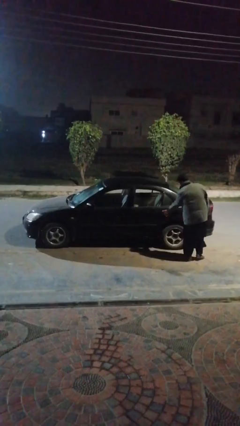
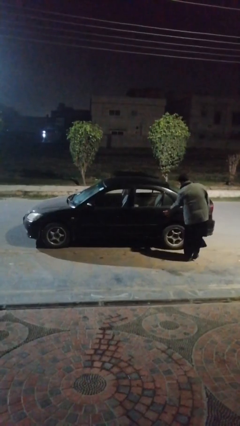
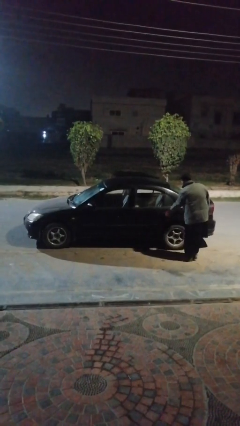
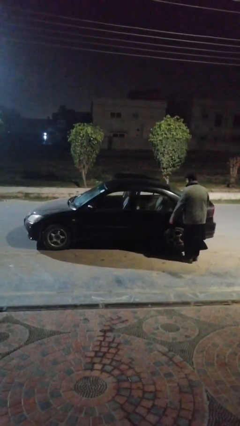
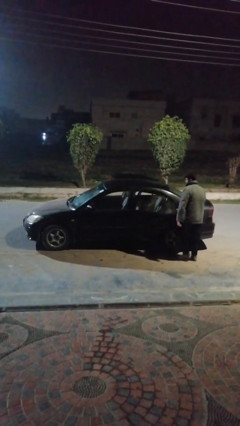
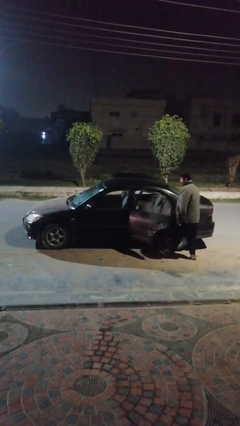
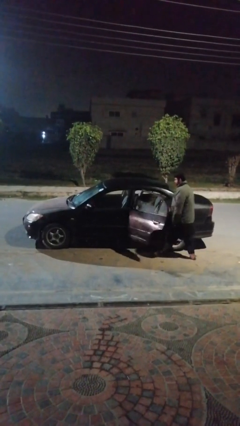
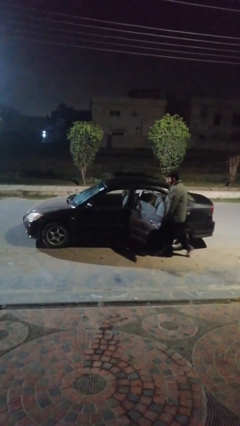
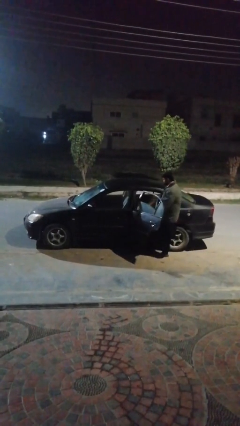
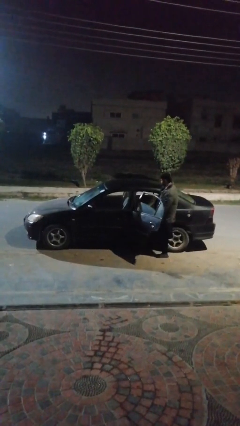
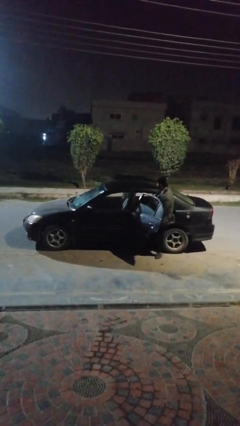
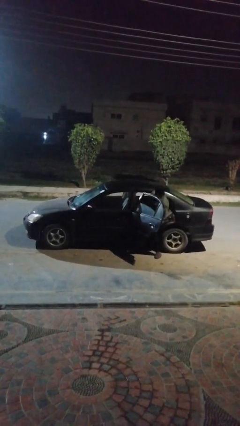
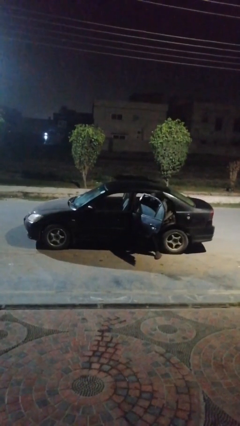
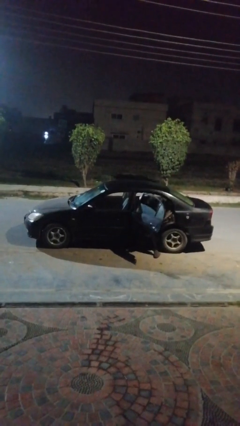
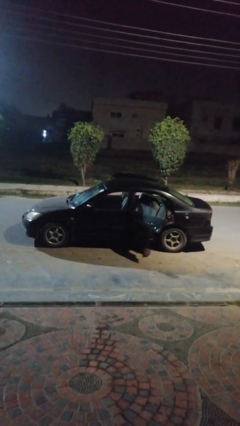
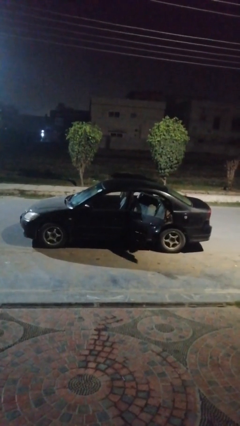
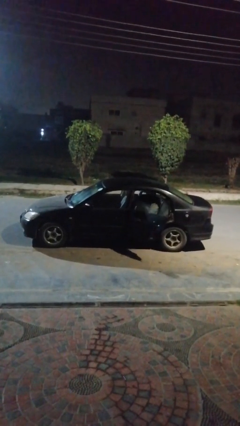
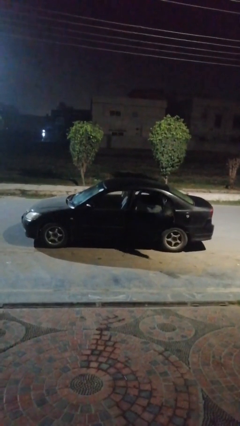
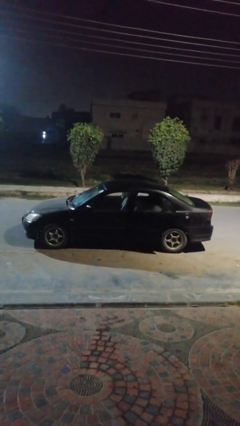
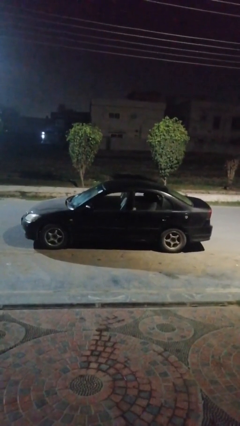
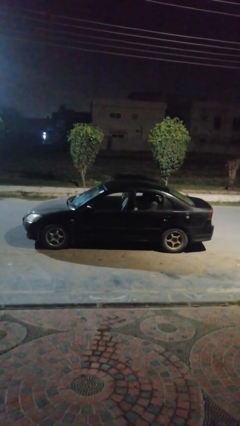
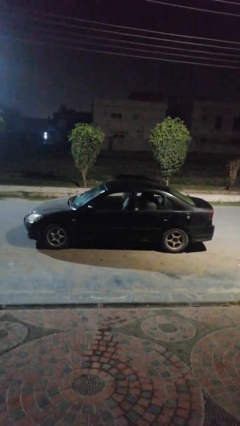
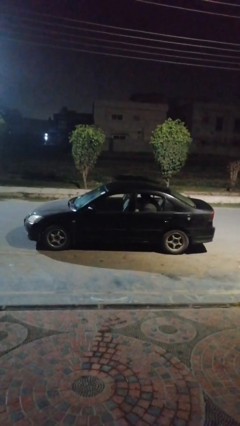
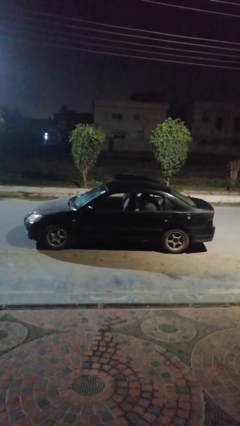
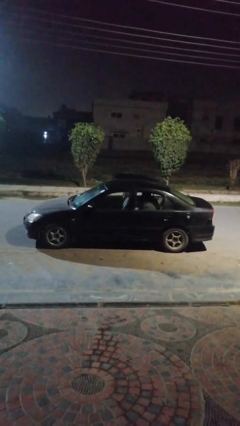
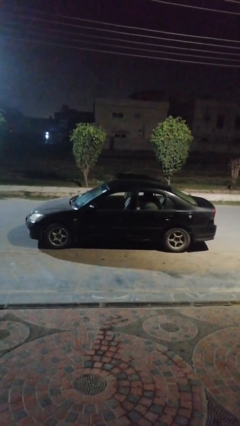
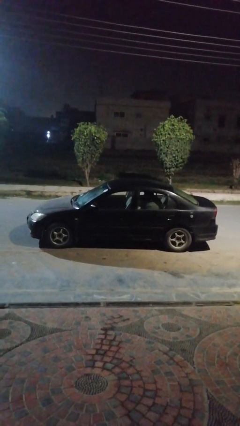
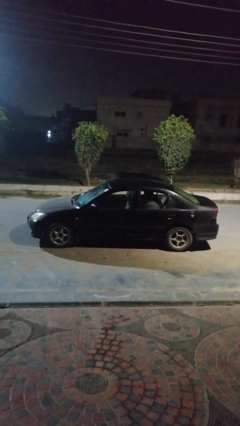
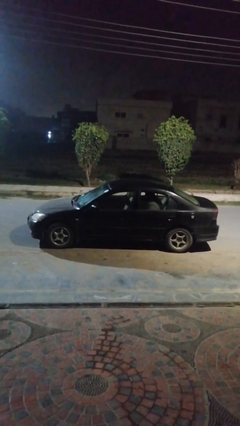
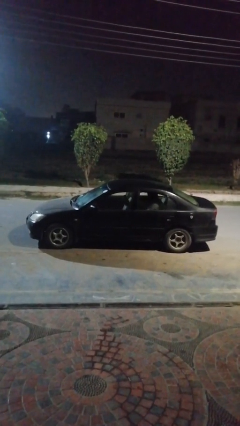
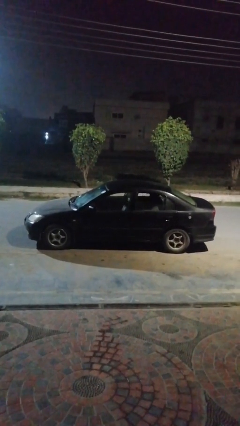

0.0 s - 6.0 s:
car picks up person

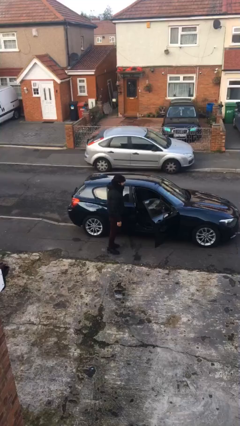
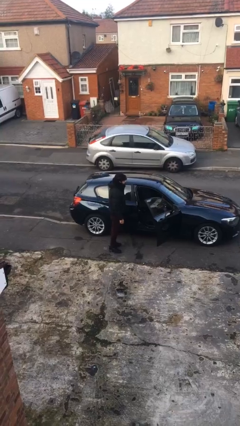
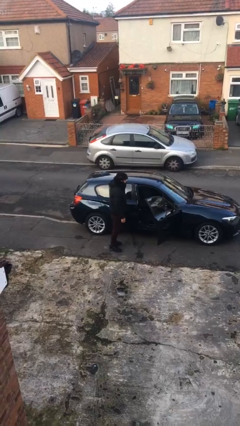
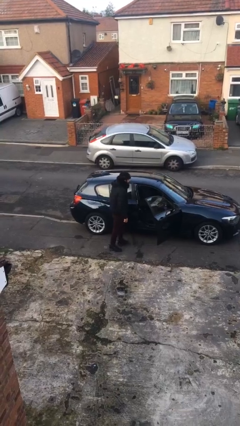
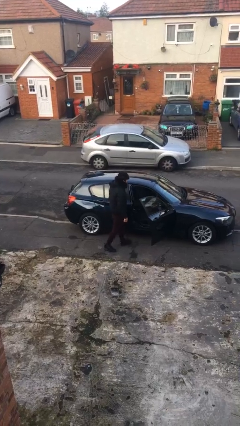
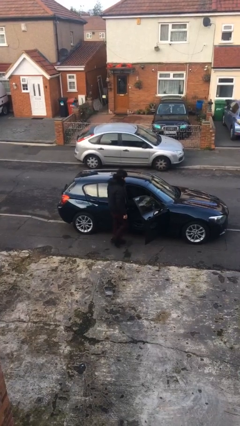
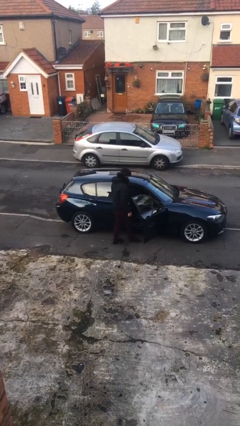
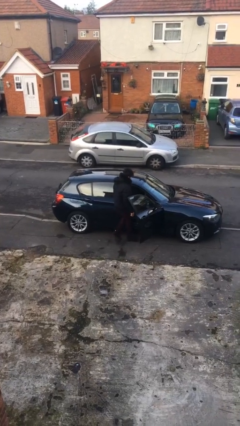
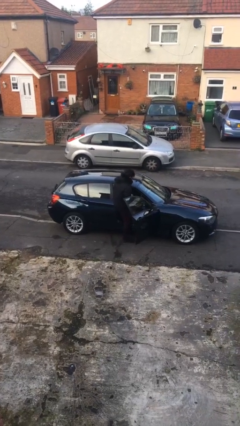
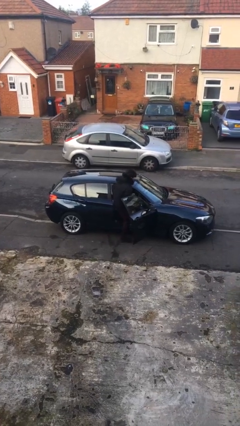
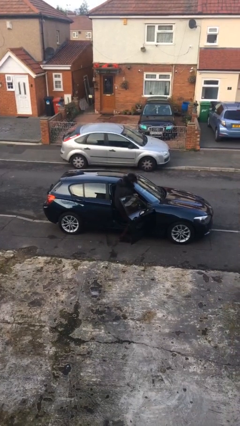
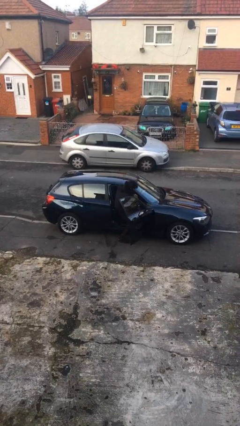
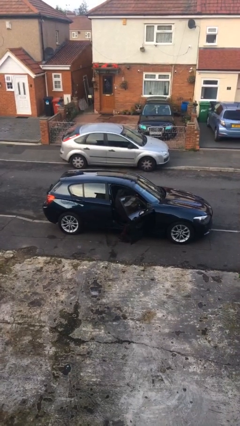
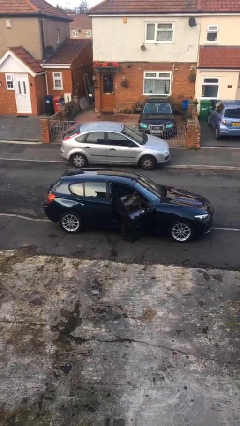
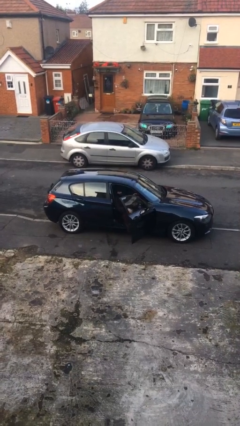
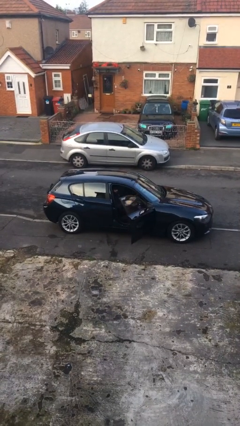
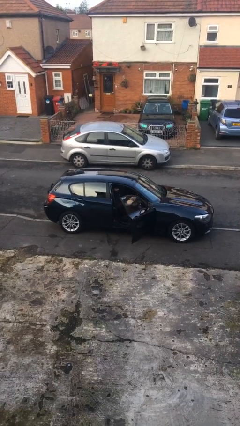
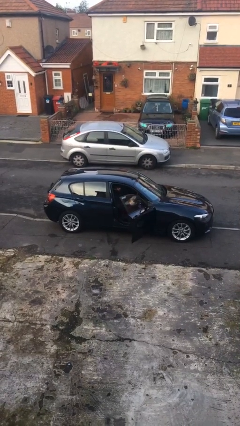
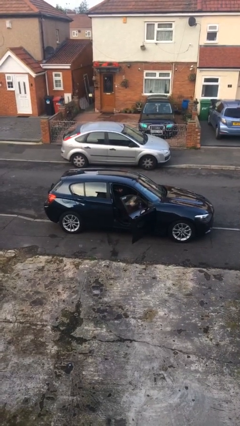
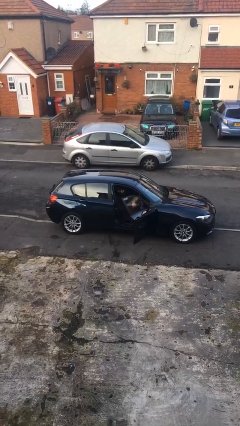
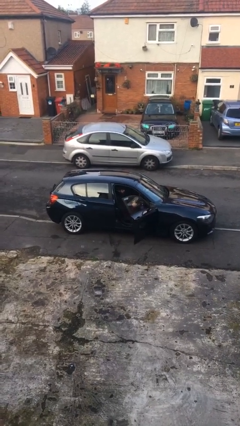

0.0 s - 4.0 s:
person enters car

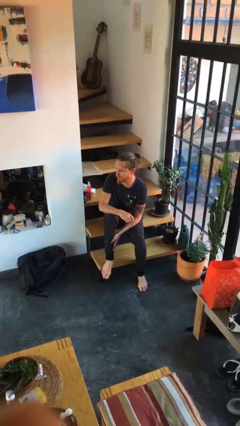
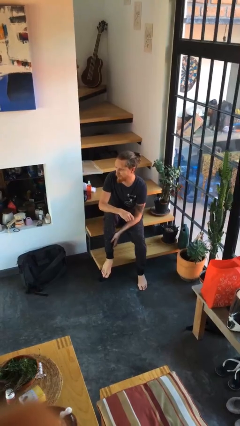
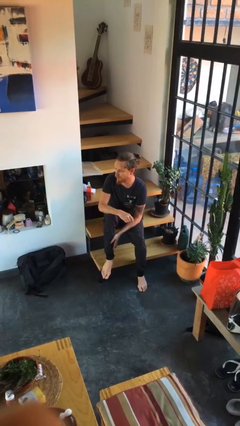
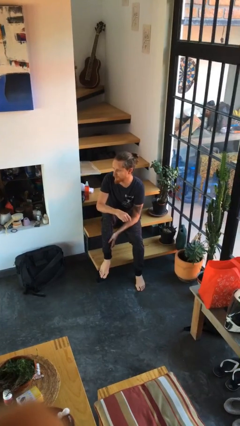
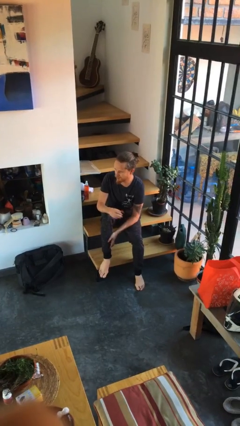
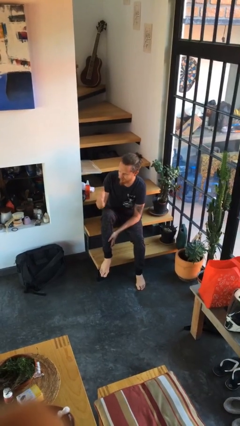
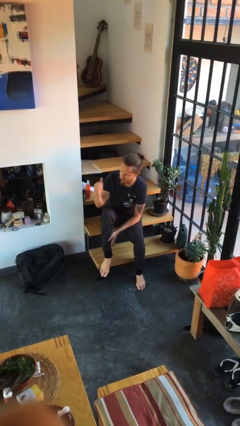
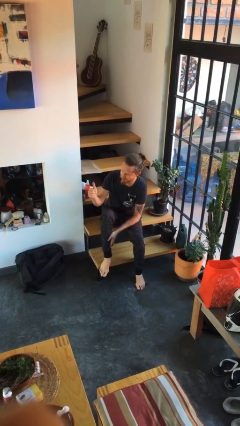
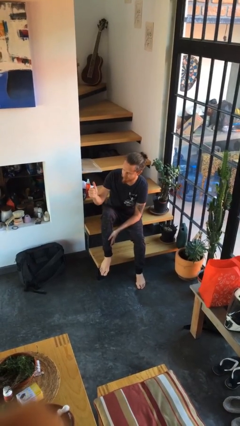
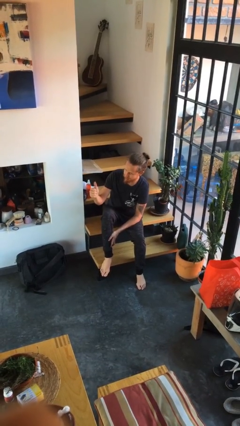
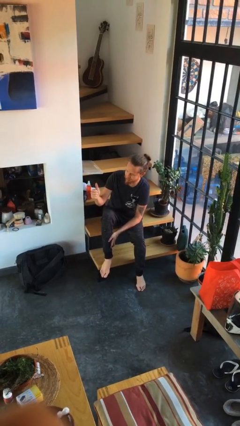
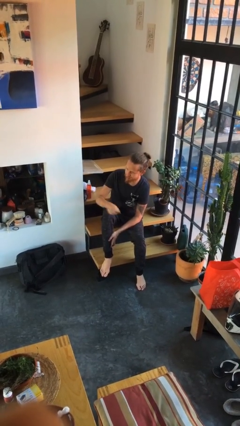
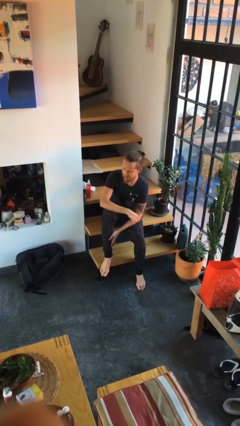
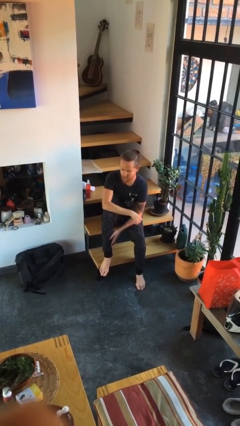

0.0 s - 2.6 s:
person gestures thumbs up

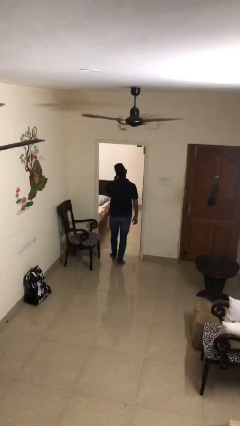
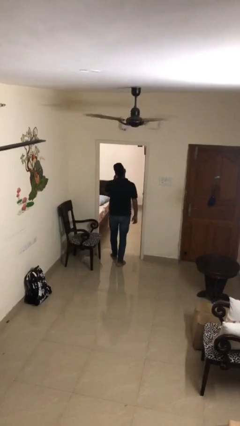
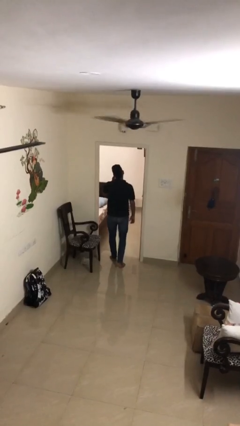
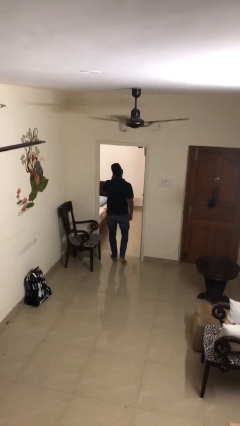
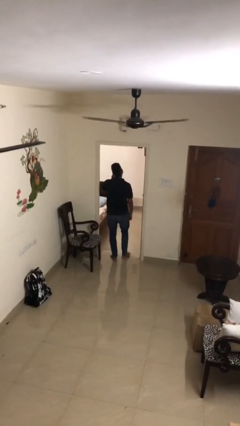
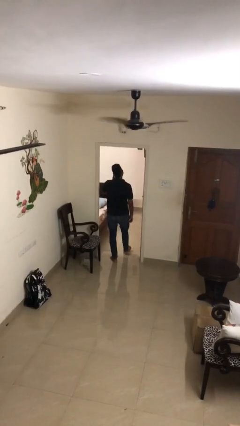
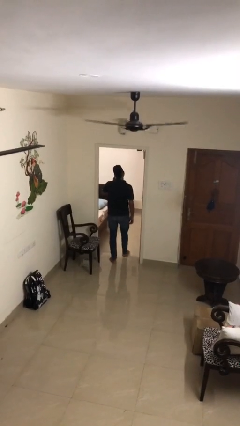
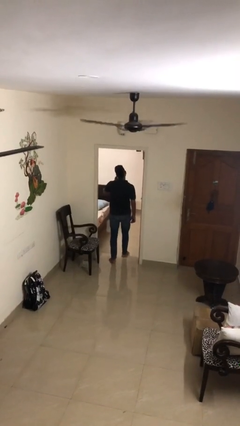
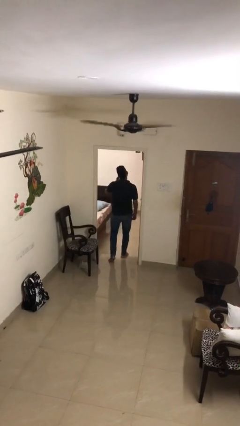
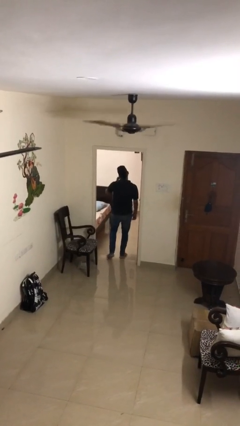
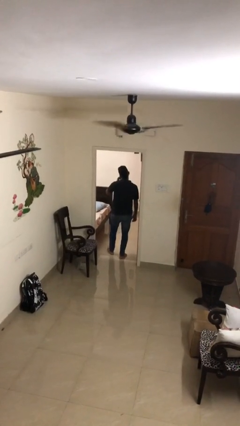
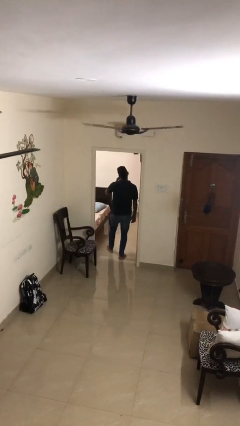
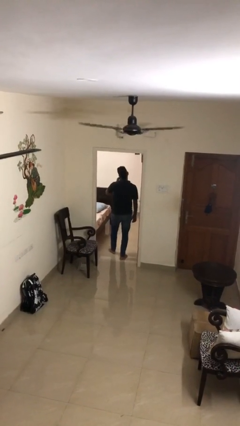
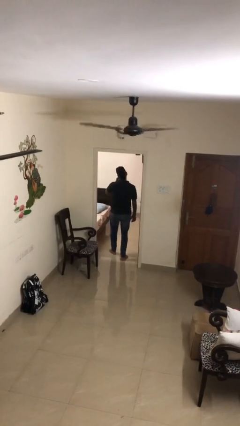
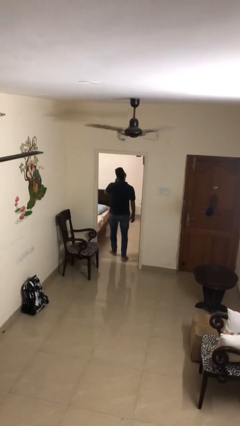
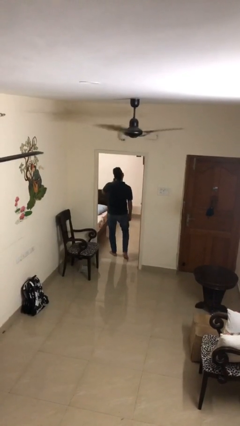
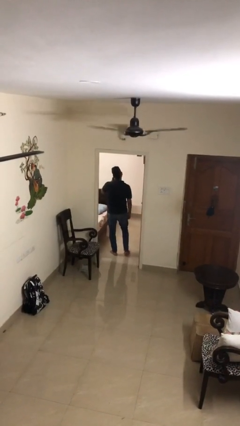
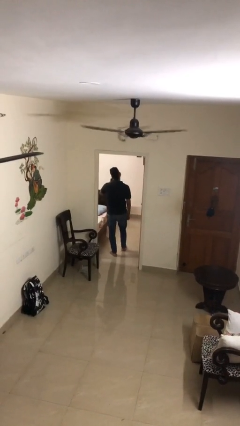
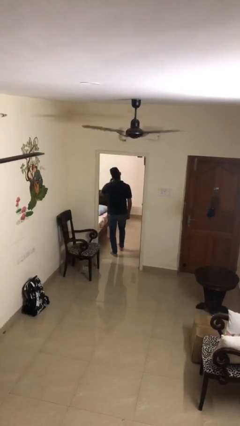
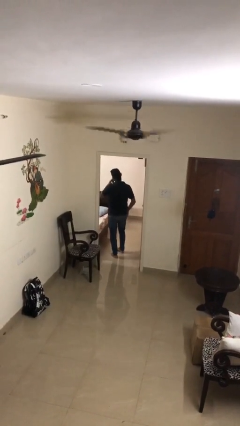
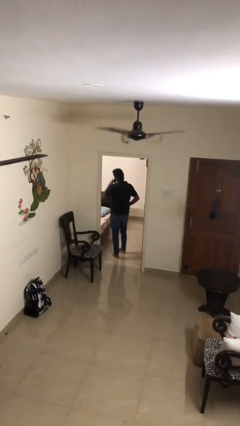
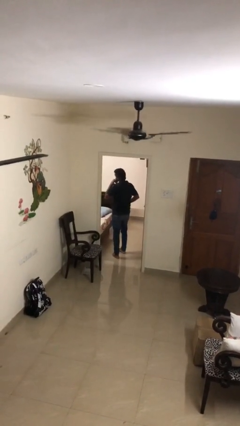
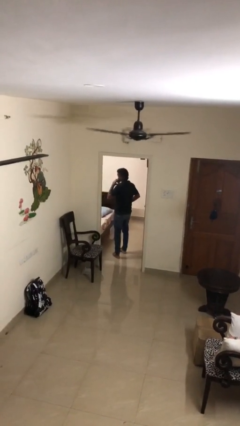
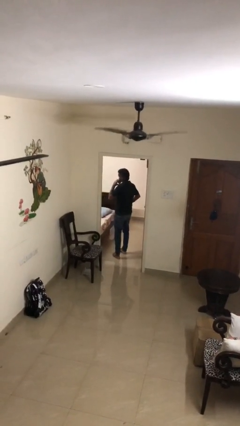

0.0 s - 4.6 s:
person exits scene through structure
